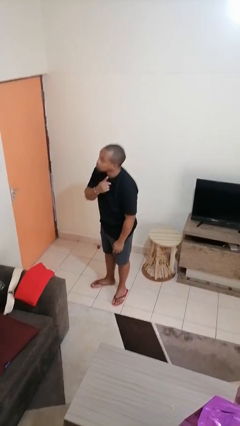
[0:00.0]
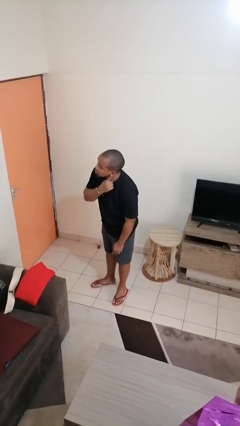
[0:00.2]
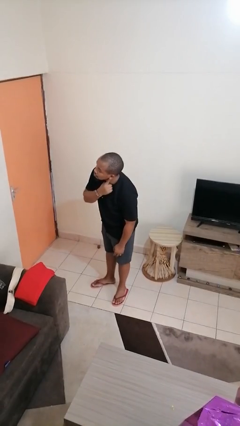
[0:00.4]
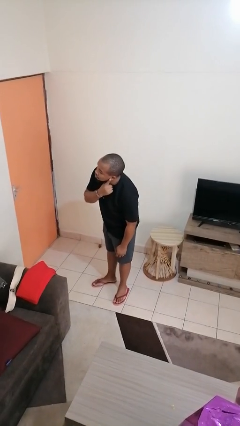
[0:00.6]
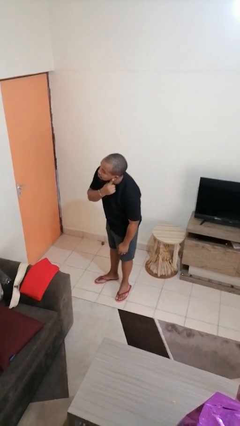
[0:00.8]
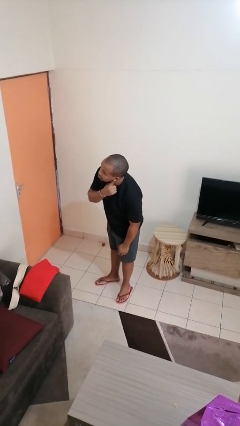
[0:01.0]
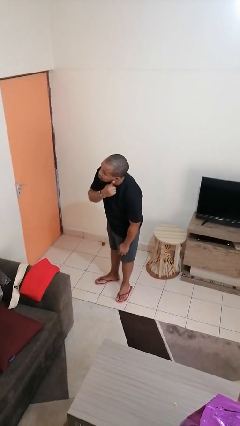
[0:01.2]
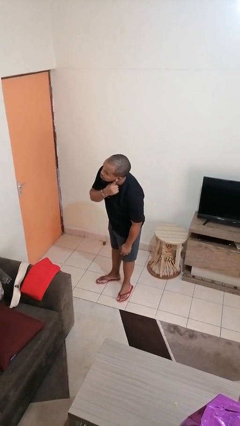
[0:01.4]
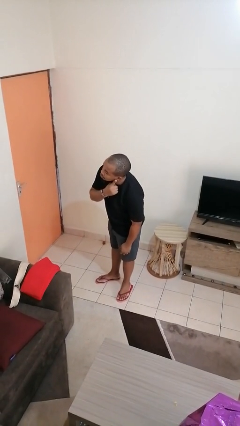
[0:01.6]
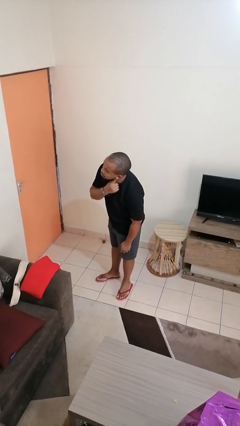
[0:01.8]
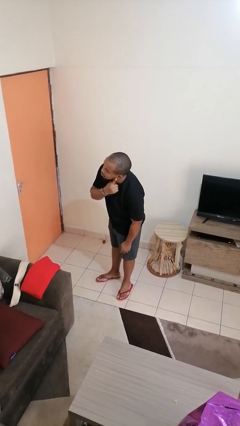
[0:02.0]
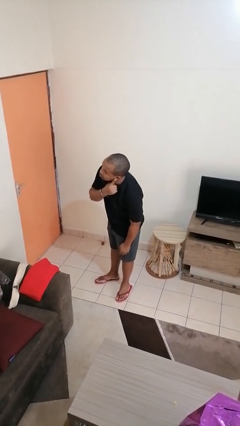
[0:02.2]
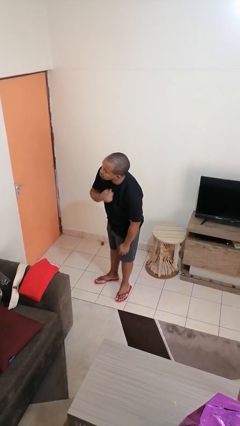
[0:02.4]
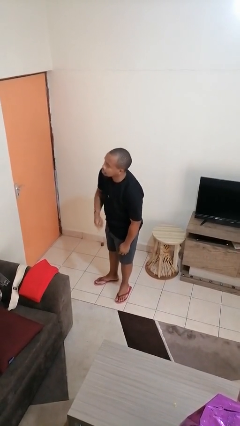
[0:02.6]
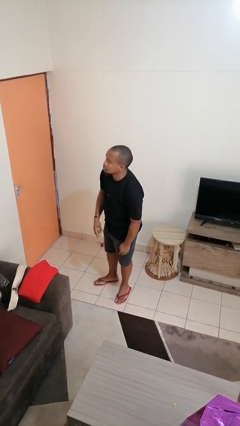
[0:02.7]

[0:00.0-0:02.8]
person gestures listen closely

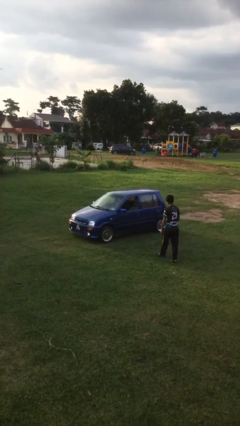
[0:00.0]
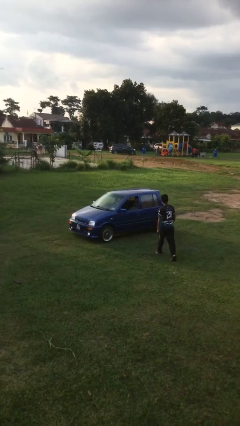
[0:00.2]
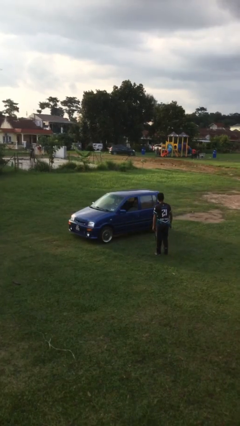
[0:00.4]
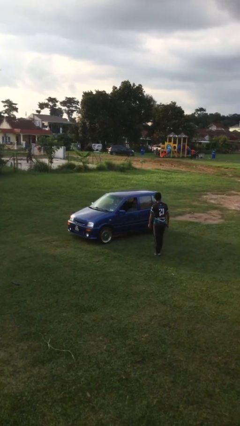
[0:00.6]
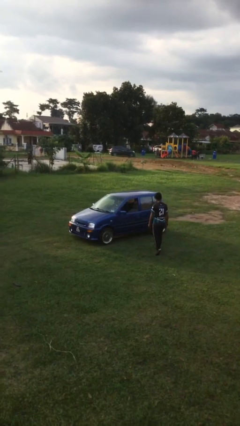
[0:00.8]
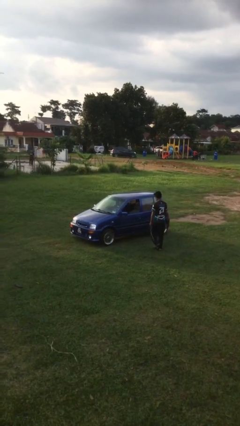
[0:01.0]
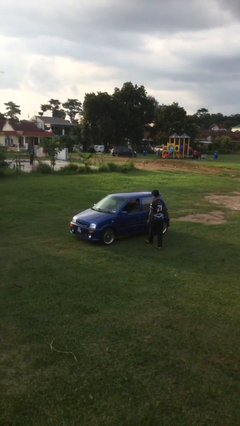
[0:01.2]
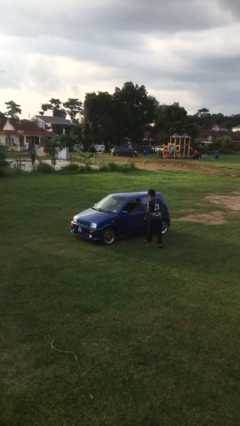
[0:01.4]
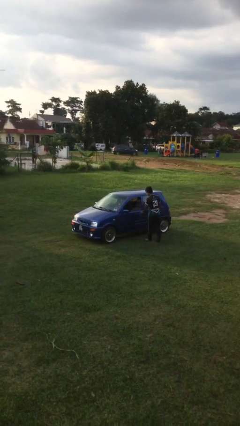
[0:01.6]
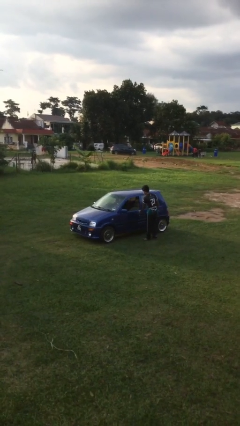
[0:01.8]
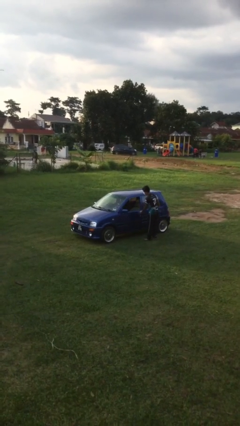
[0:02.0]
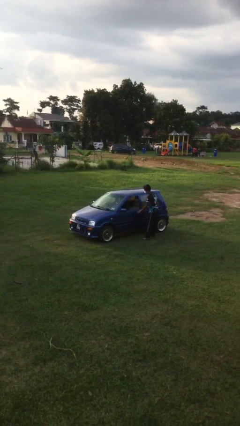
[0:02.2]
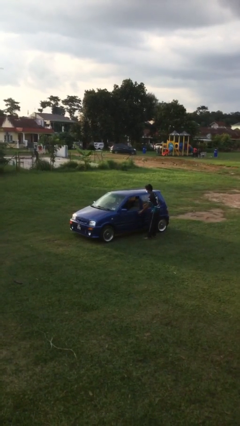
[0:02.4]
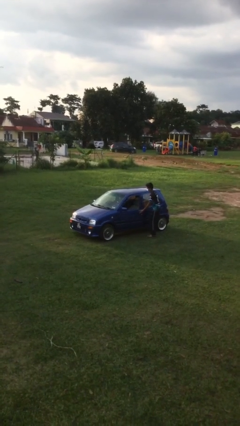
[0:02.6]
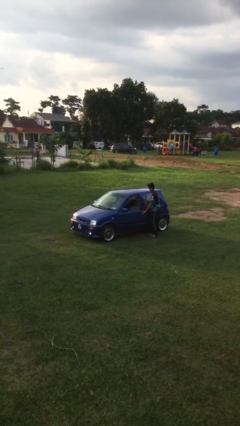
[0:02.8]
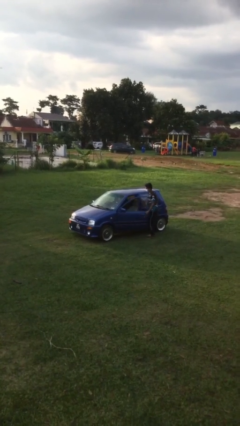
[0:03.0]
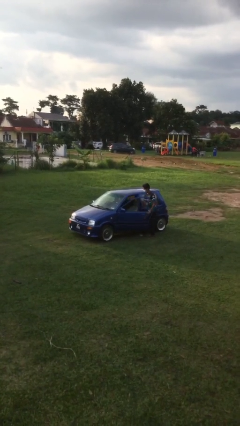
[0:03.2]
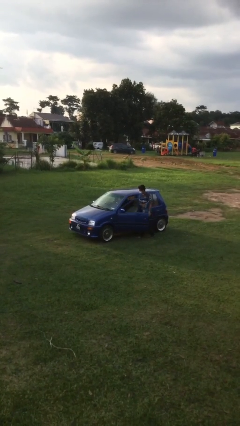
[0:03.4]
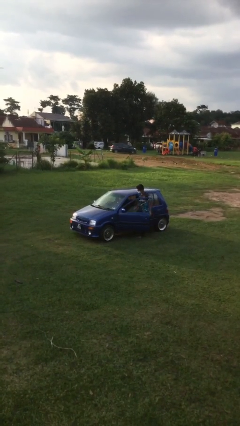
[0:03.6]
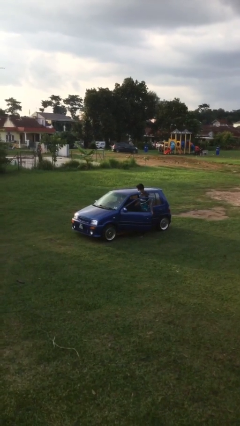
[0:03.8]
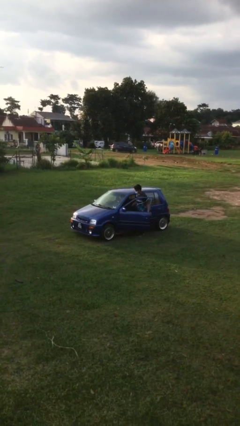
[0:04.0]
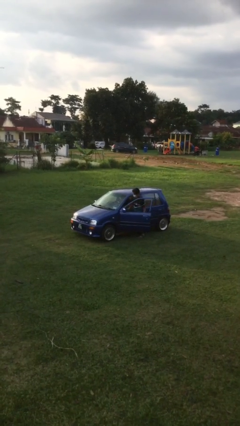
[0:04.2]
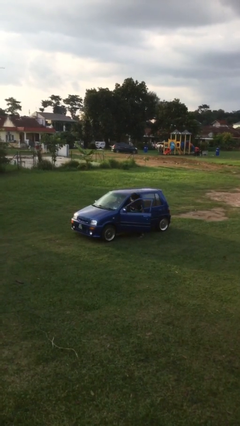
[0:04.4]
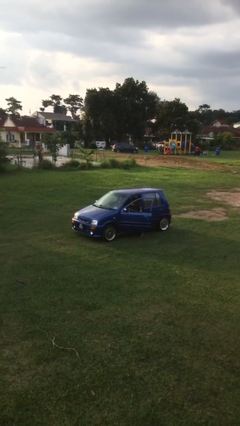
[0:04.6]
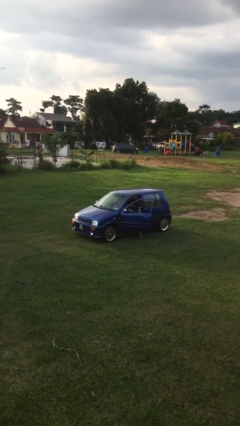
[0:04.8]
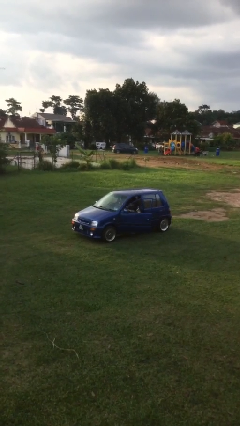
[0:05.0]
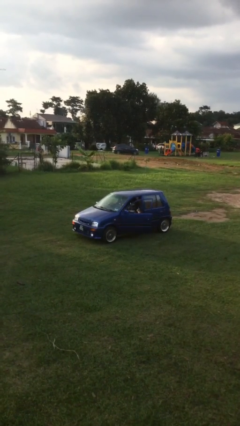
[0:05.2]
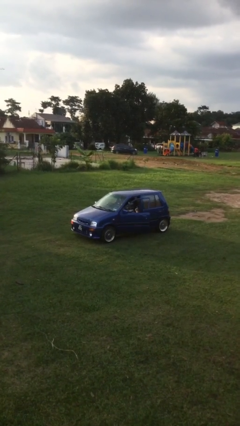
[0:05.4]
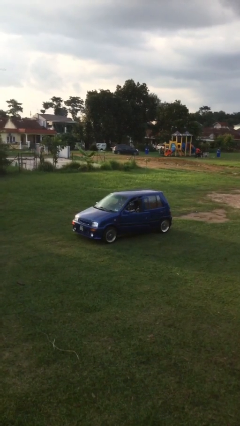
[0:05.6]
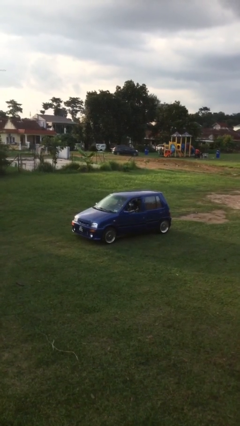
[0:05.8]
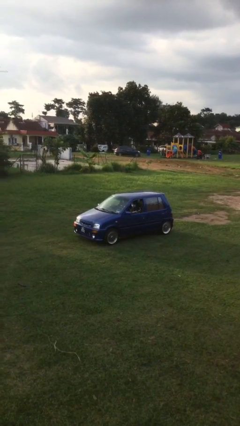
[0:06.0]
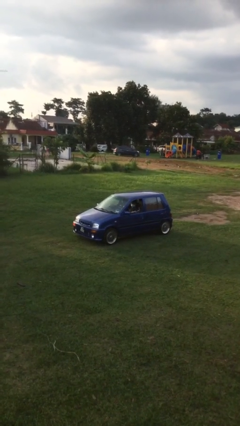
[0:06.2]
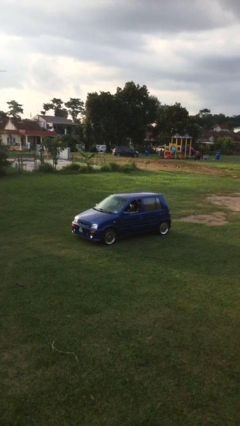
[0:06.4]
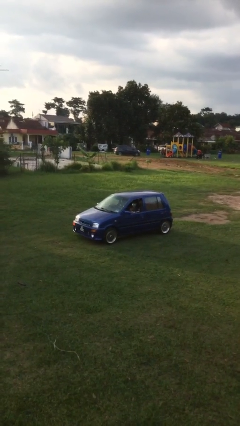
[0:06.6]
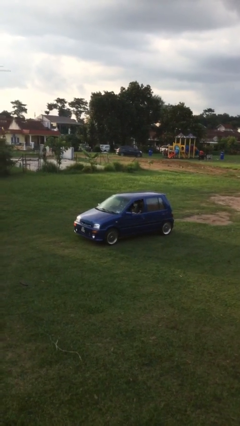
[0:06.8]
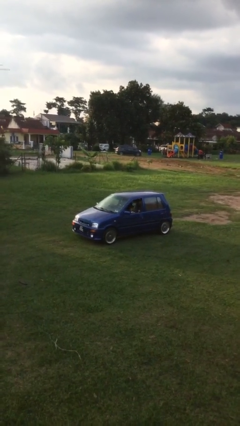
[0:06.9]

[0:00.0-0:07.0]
car picks up person

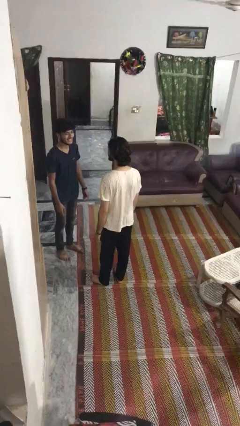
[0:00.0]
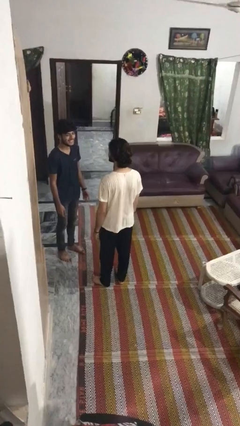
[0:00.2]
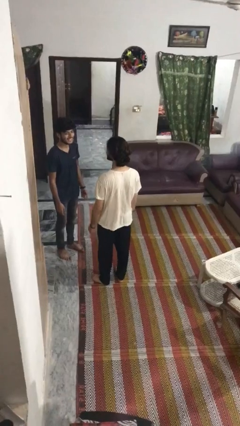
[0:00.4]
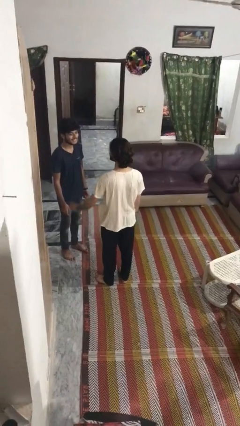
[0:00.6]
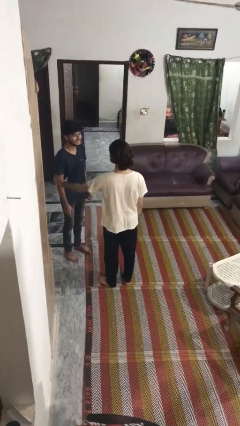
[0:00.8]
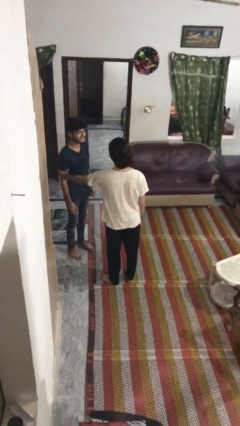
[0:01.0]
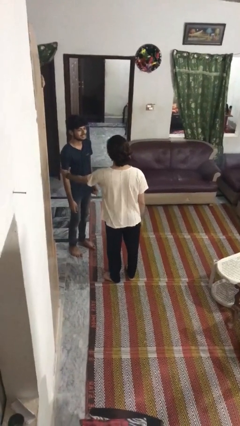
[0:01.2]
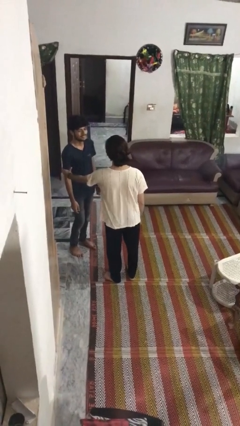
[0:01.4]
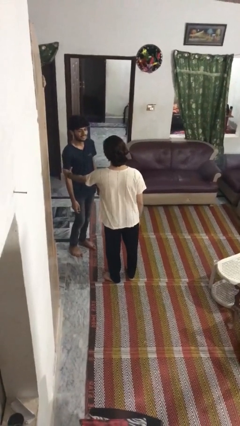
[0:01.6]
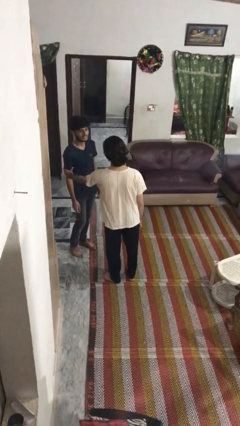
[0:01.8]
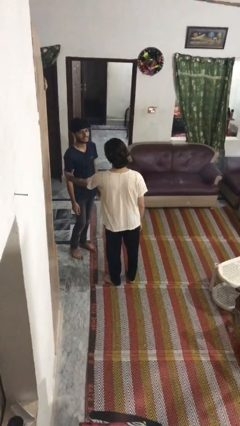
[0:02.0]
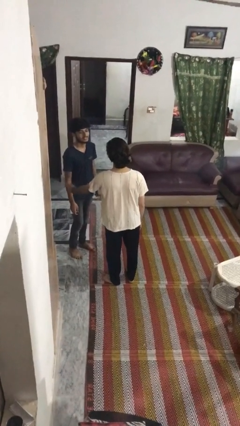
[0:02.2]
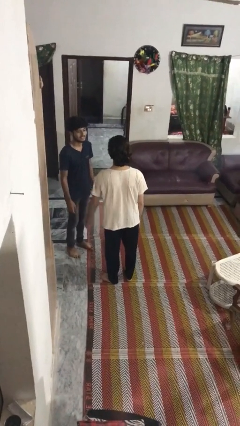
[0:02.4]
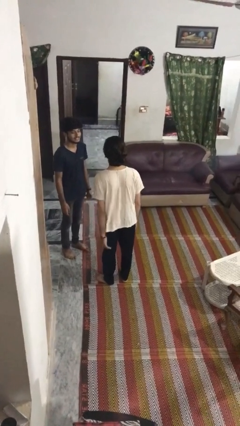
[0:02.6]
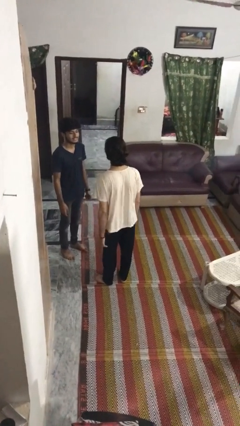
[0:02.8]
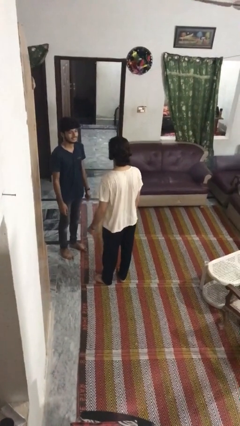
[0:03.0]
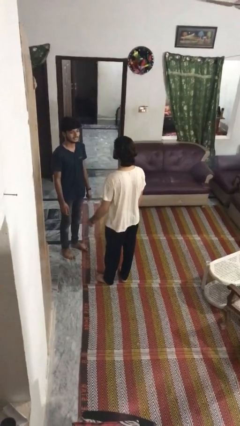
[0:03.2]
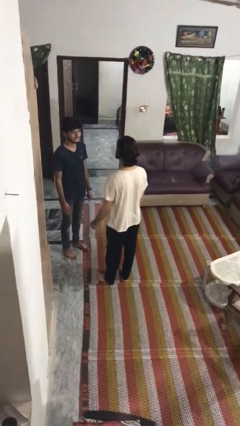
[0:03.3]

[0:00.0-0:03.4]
person grabs person by bicep

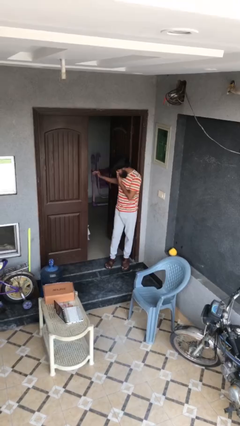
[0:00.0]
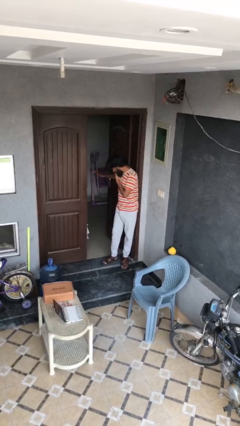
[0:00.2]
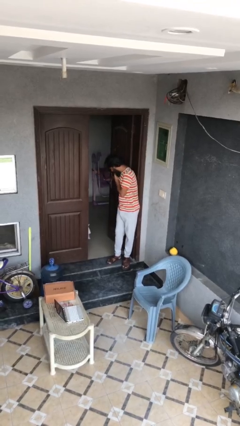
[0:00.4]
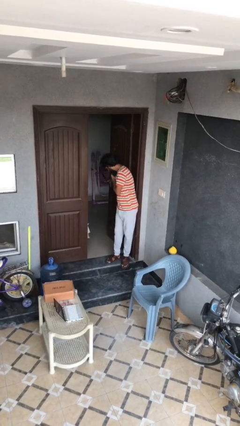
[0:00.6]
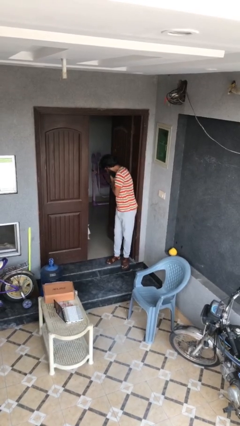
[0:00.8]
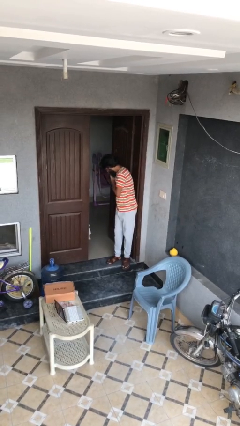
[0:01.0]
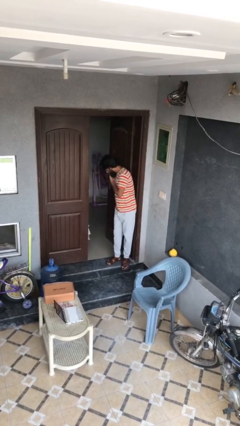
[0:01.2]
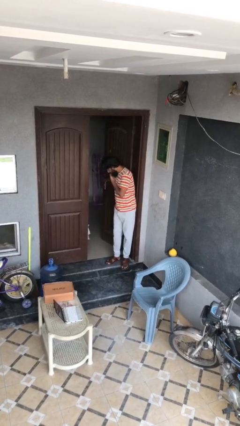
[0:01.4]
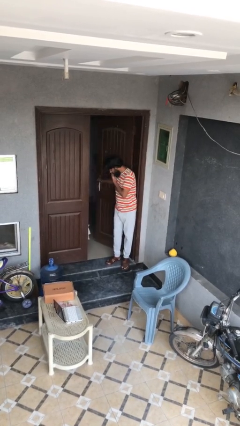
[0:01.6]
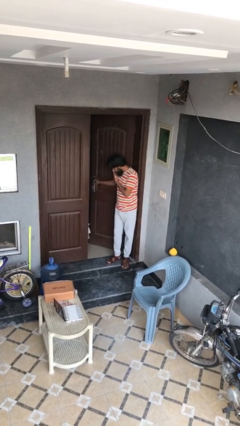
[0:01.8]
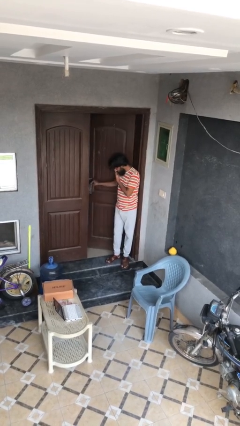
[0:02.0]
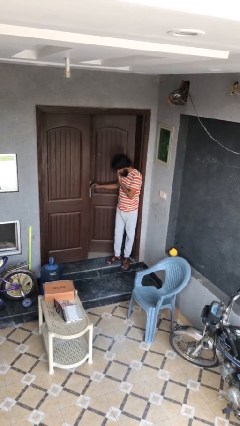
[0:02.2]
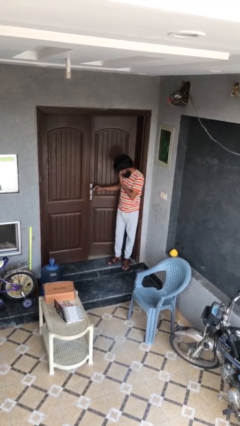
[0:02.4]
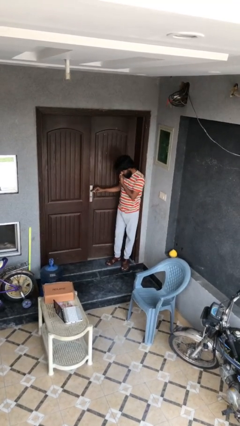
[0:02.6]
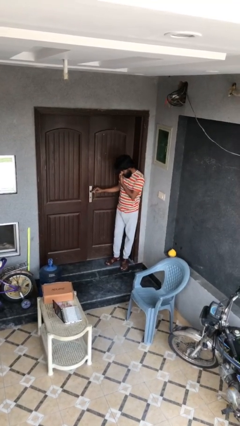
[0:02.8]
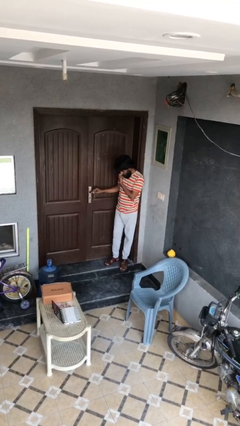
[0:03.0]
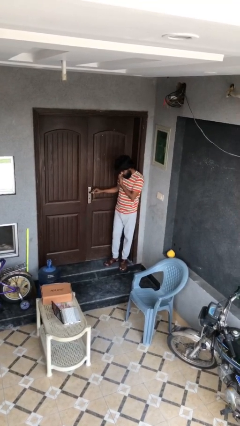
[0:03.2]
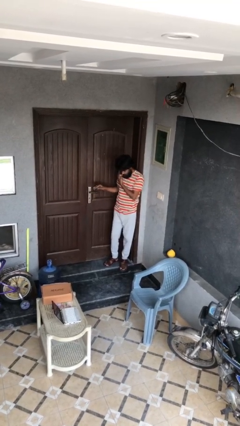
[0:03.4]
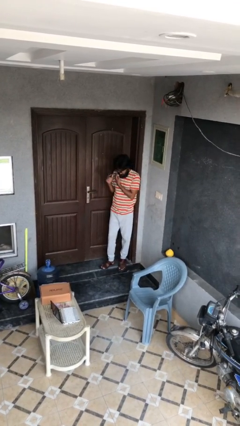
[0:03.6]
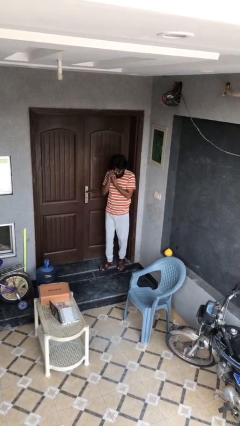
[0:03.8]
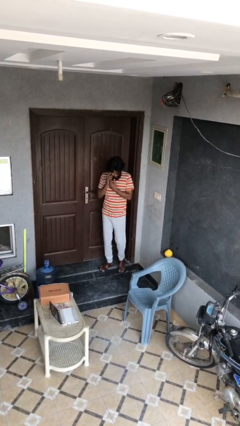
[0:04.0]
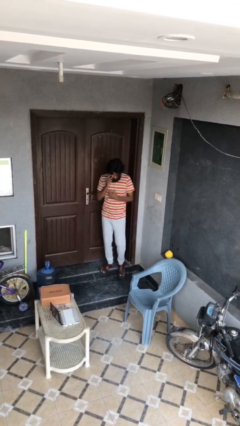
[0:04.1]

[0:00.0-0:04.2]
person closes facility door
